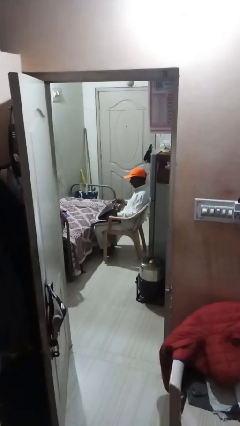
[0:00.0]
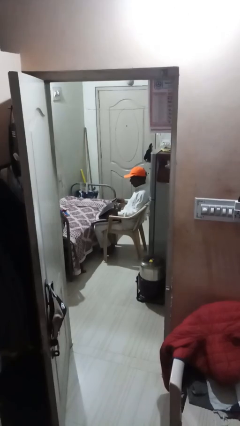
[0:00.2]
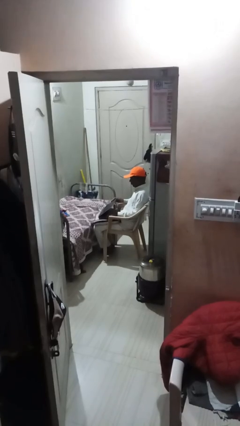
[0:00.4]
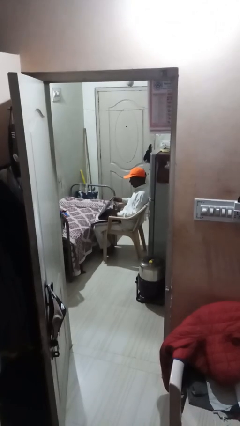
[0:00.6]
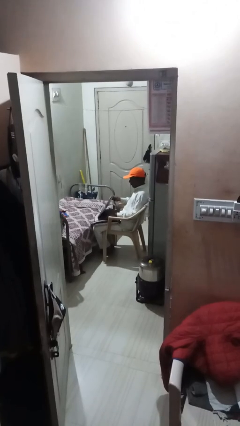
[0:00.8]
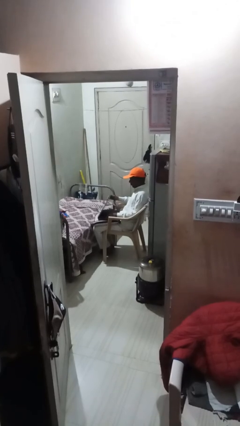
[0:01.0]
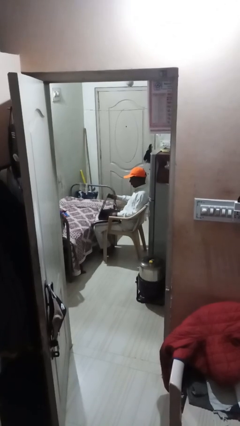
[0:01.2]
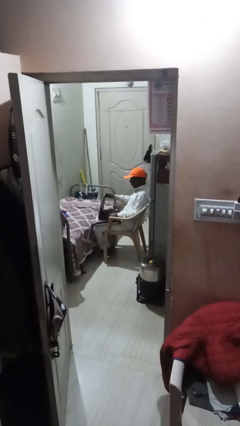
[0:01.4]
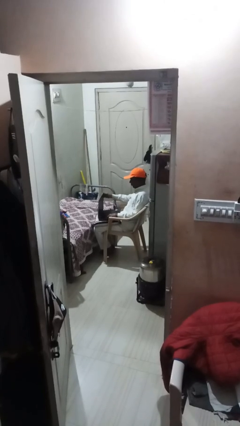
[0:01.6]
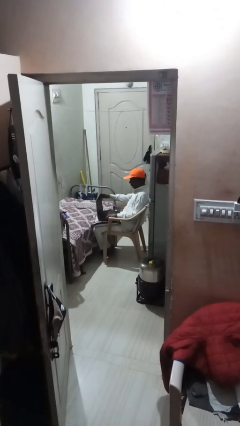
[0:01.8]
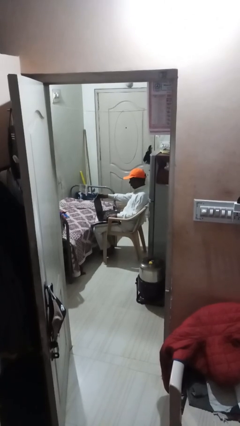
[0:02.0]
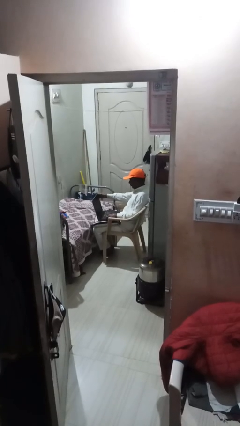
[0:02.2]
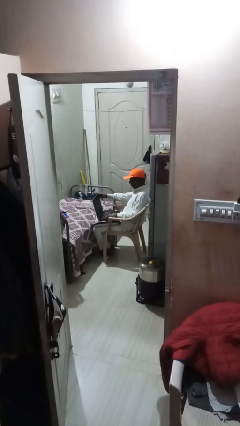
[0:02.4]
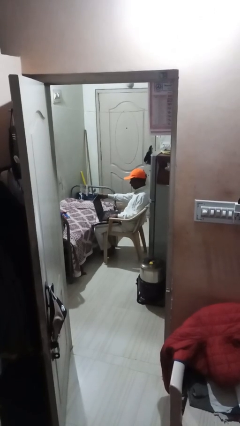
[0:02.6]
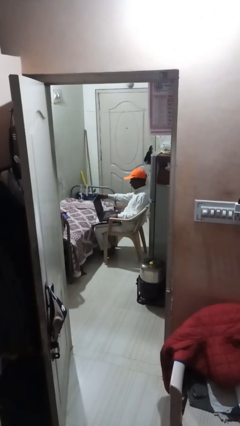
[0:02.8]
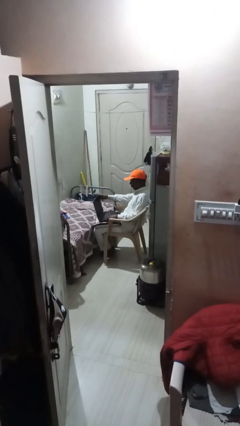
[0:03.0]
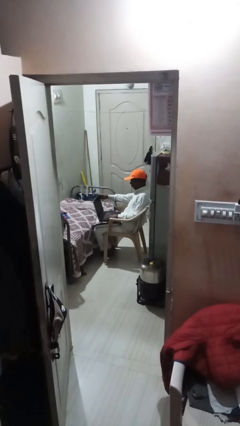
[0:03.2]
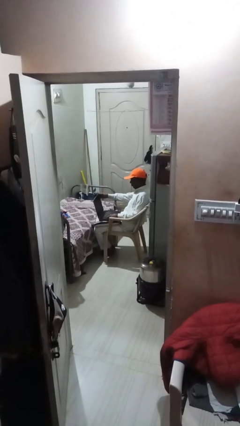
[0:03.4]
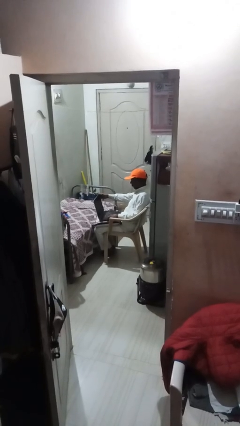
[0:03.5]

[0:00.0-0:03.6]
person interacts with laptop

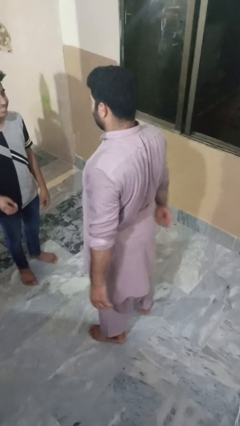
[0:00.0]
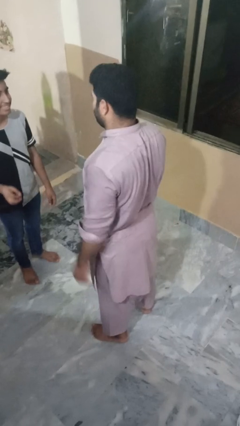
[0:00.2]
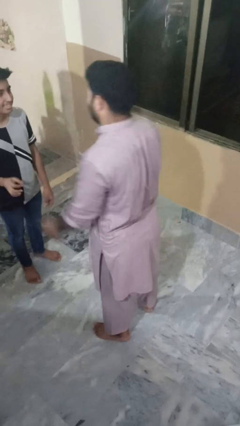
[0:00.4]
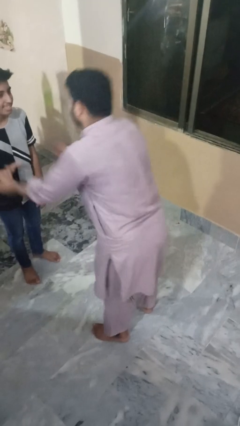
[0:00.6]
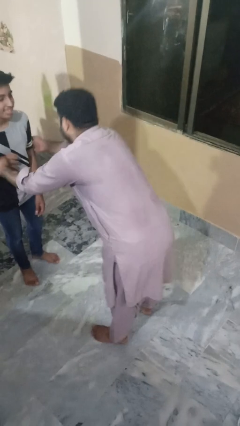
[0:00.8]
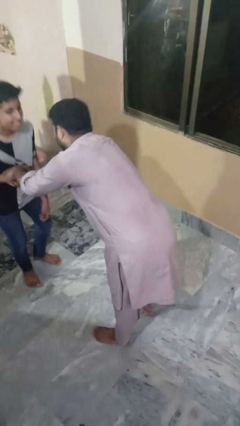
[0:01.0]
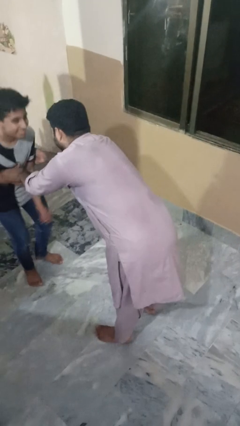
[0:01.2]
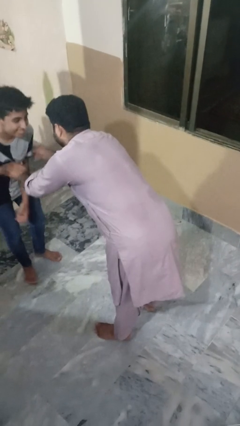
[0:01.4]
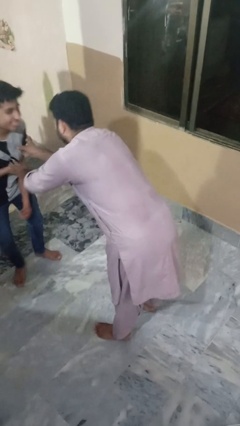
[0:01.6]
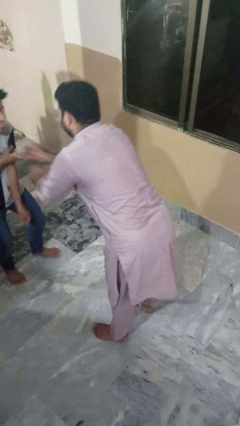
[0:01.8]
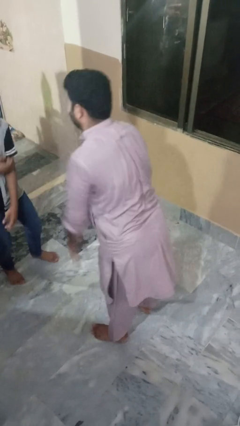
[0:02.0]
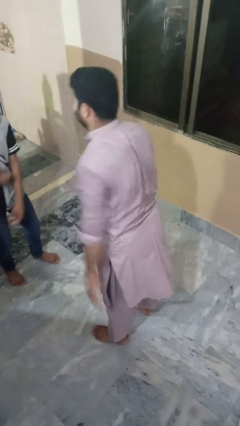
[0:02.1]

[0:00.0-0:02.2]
person tickles person

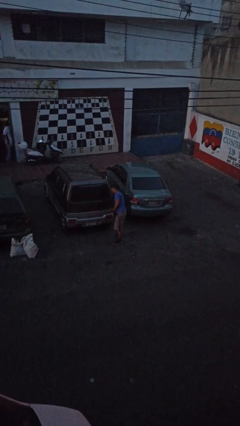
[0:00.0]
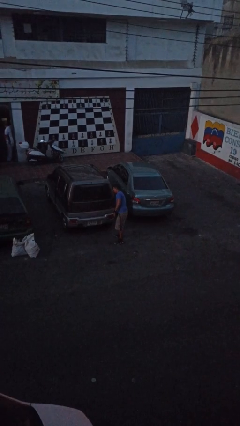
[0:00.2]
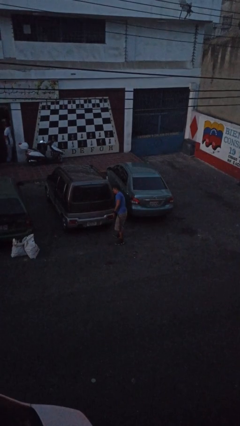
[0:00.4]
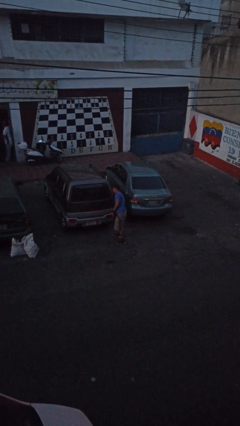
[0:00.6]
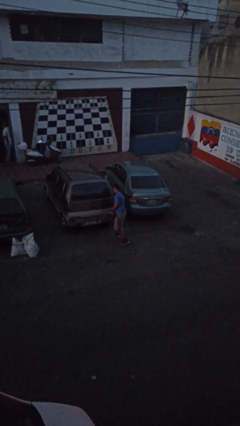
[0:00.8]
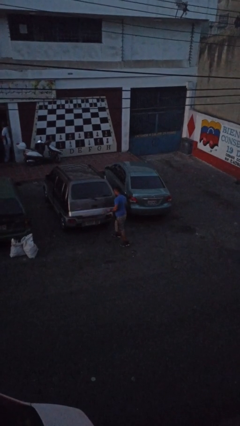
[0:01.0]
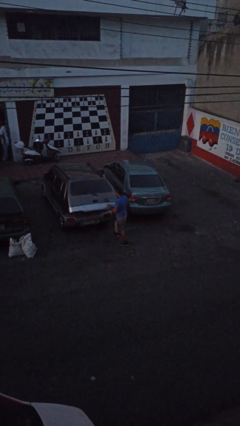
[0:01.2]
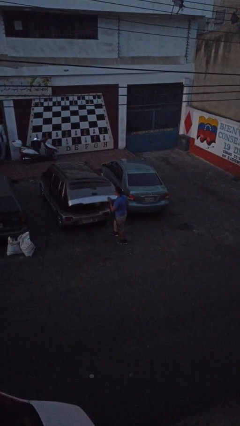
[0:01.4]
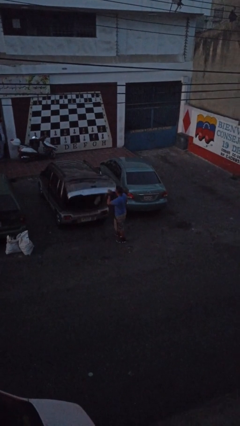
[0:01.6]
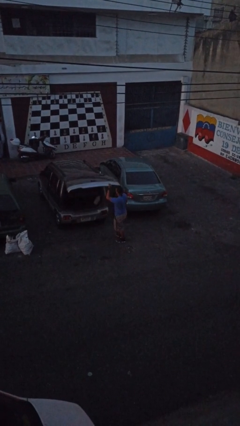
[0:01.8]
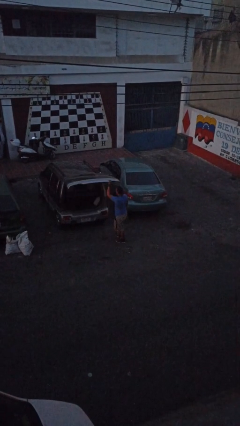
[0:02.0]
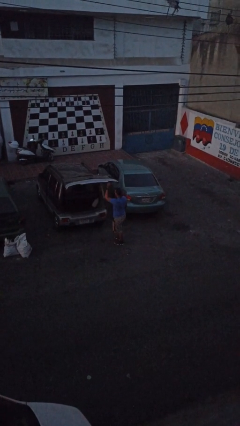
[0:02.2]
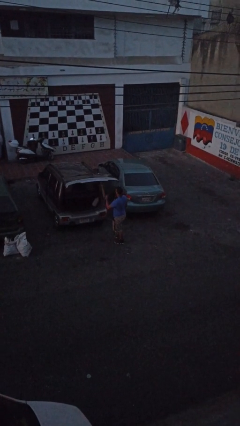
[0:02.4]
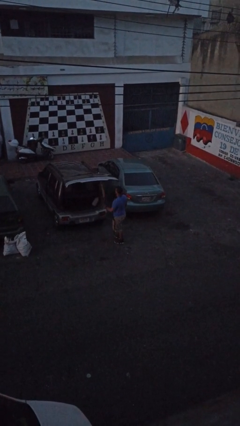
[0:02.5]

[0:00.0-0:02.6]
person opens car trunk

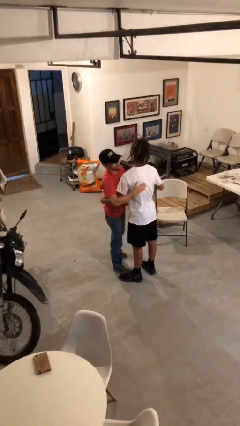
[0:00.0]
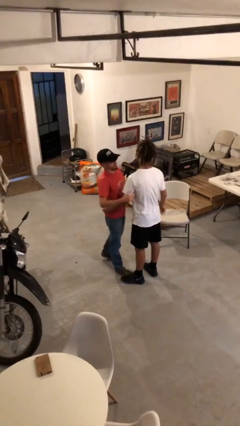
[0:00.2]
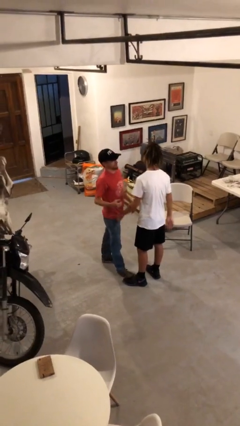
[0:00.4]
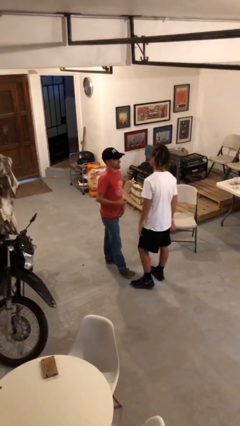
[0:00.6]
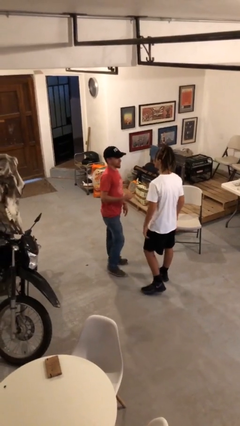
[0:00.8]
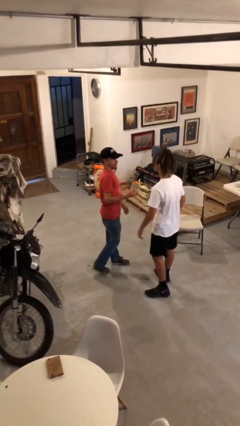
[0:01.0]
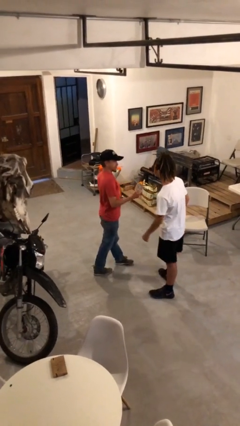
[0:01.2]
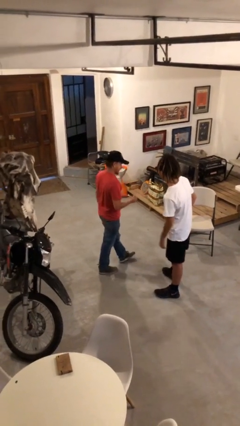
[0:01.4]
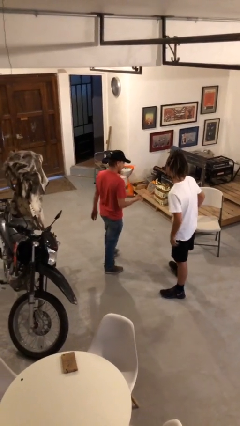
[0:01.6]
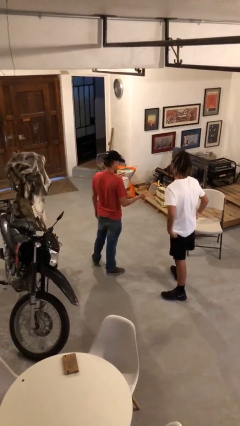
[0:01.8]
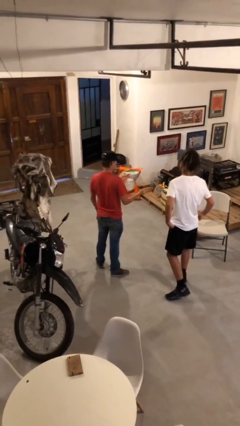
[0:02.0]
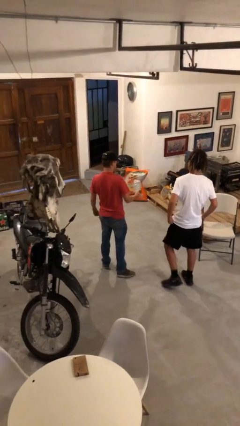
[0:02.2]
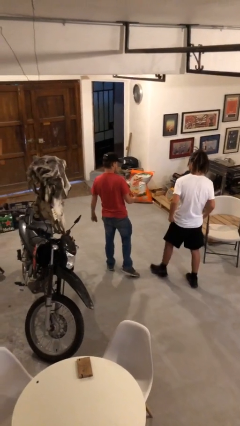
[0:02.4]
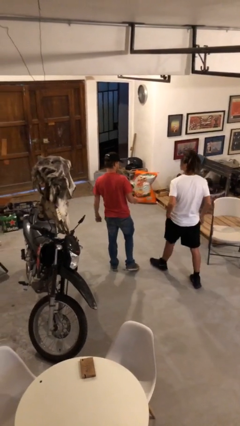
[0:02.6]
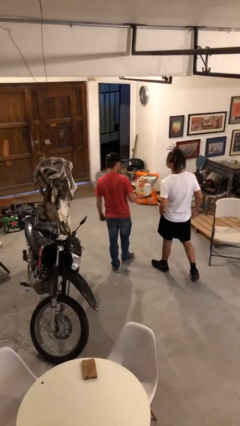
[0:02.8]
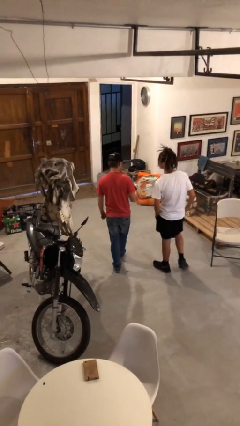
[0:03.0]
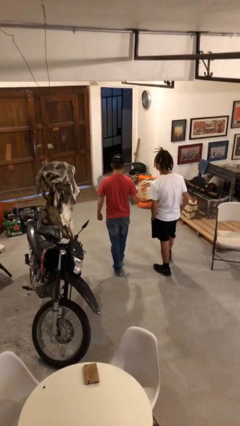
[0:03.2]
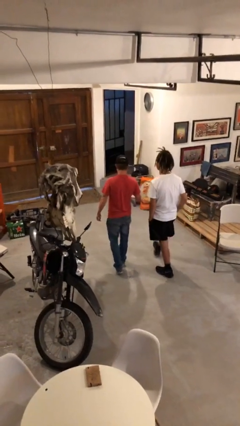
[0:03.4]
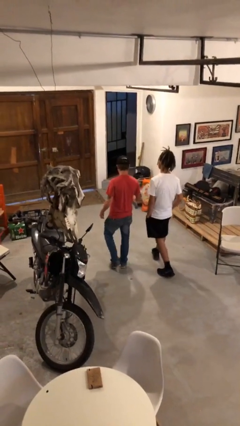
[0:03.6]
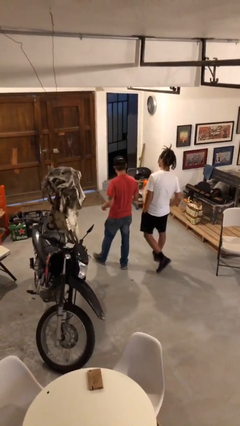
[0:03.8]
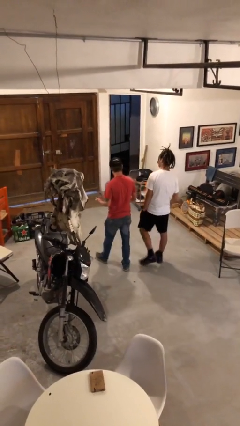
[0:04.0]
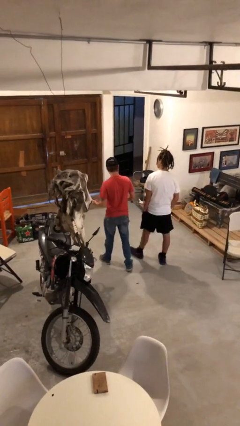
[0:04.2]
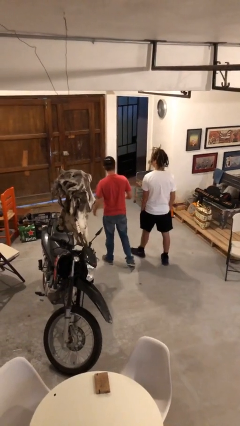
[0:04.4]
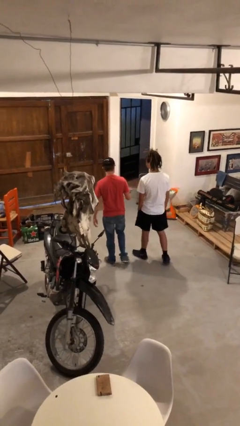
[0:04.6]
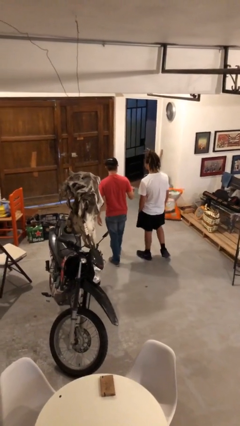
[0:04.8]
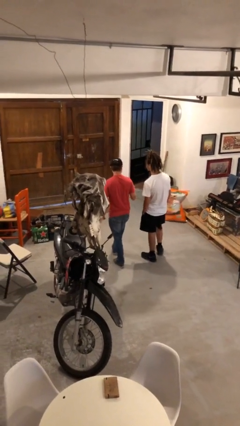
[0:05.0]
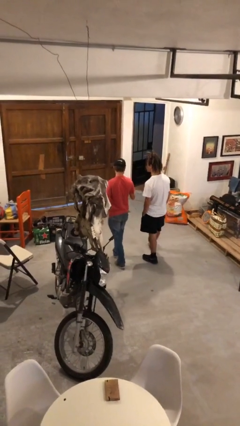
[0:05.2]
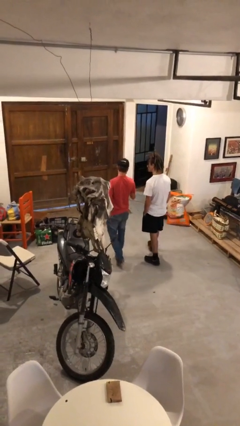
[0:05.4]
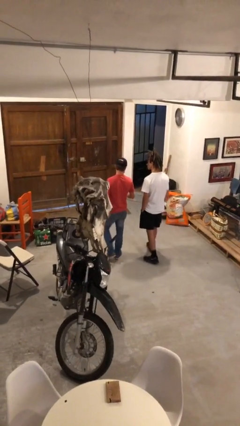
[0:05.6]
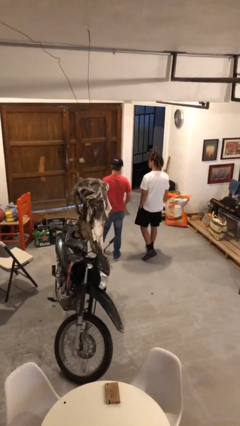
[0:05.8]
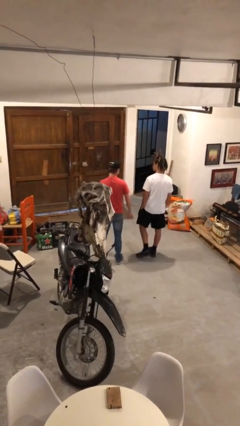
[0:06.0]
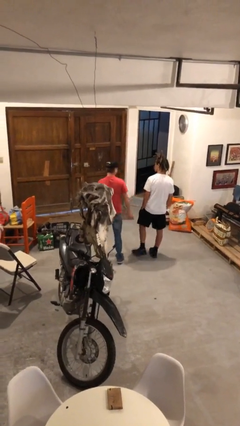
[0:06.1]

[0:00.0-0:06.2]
person talks to person

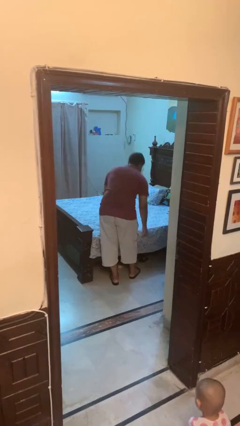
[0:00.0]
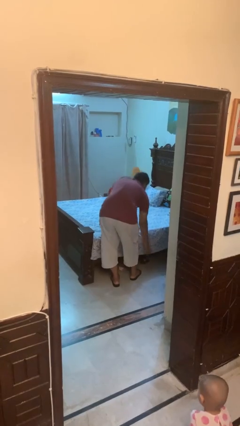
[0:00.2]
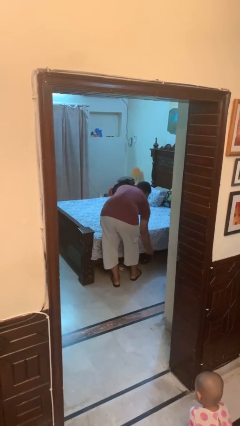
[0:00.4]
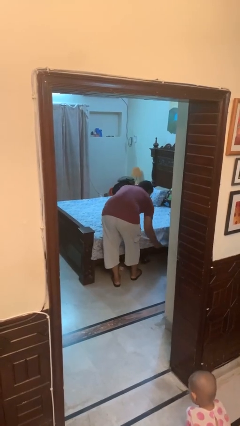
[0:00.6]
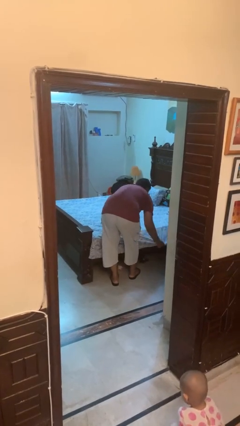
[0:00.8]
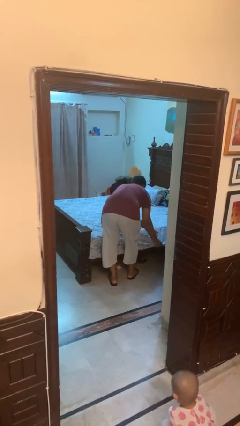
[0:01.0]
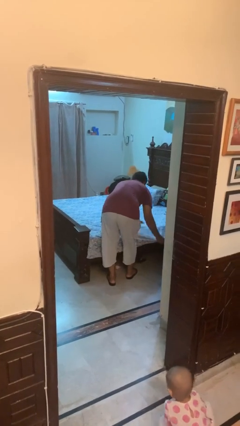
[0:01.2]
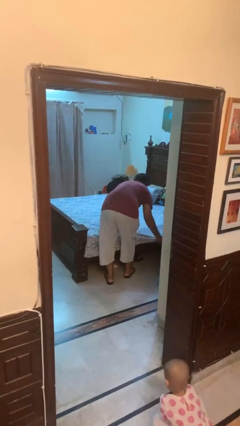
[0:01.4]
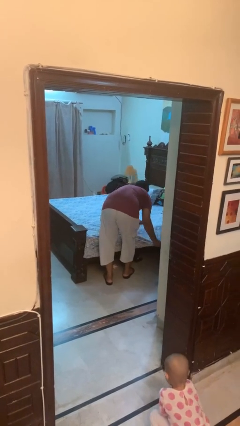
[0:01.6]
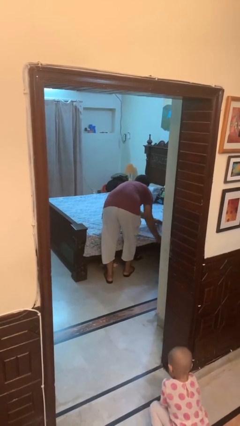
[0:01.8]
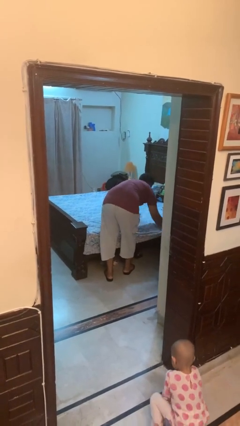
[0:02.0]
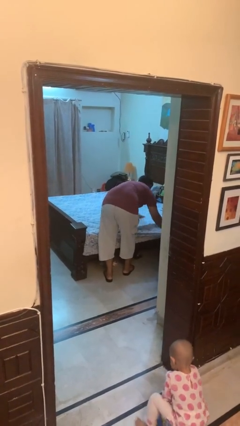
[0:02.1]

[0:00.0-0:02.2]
person makes bed
